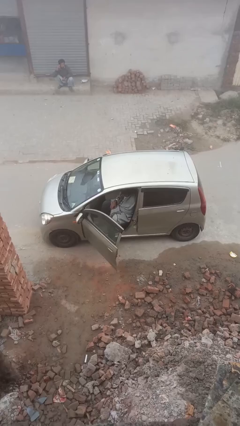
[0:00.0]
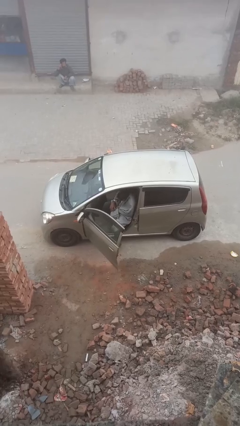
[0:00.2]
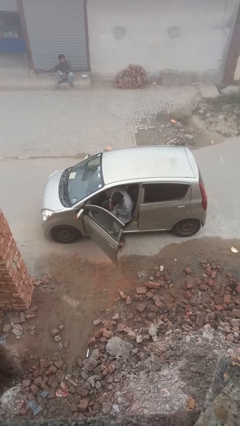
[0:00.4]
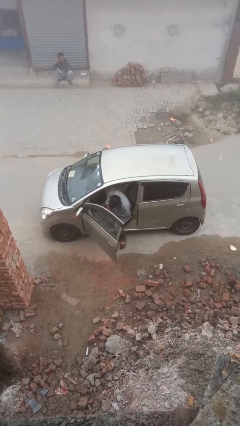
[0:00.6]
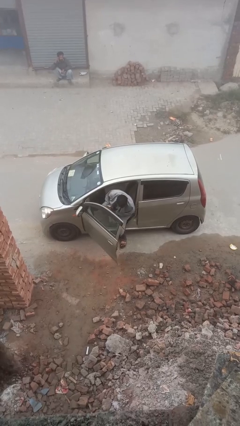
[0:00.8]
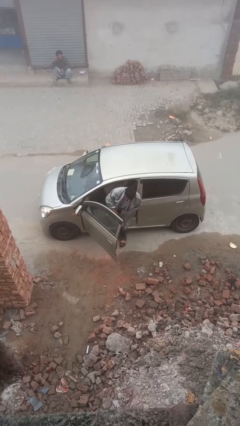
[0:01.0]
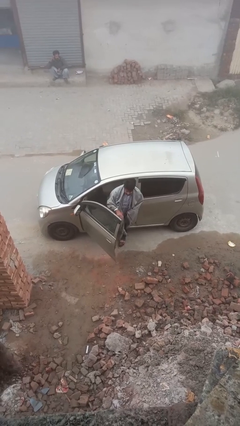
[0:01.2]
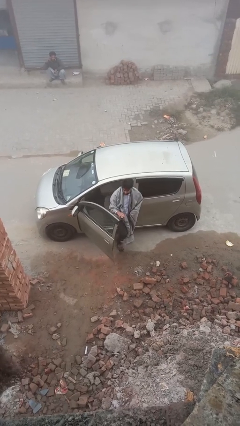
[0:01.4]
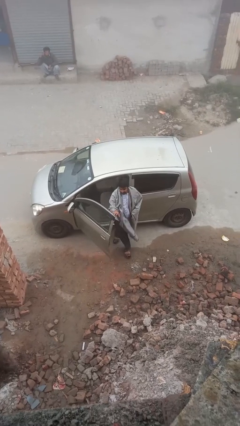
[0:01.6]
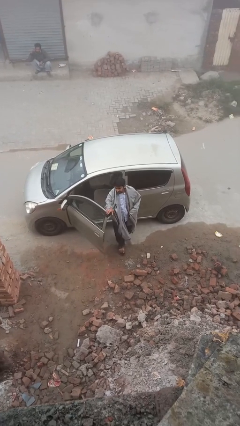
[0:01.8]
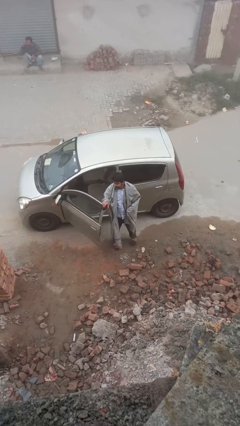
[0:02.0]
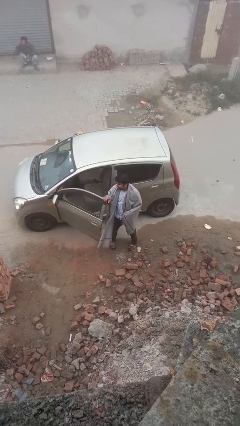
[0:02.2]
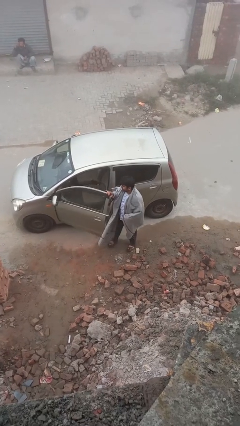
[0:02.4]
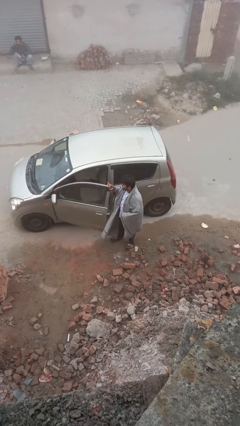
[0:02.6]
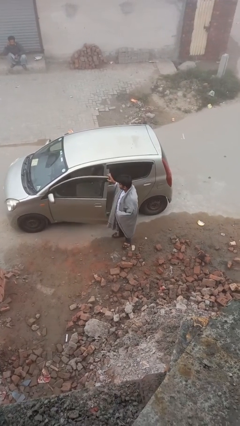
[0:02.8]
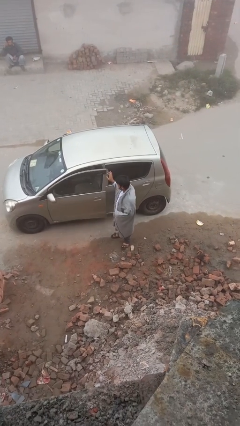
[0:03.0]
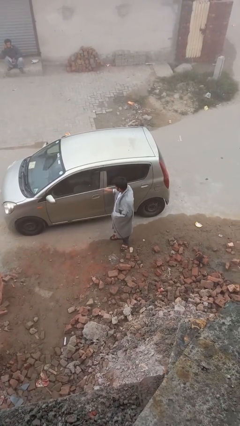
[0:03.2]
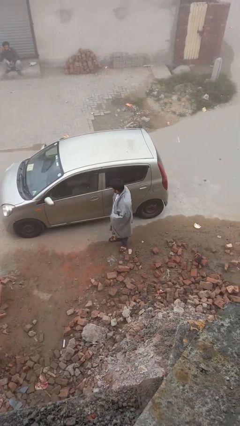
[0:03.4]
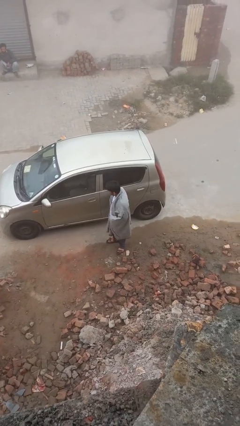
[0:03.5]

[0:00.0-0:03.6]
person exits car

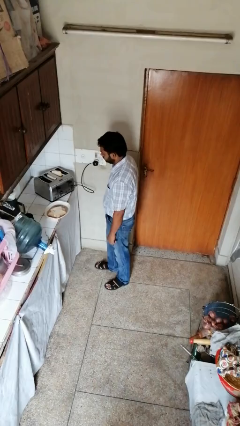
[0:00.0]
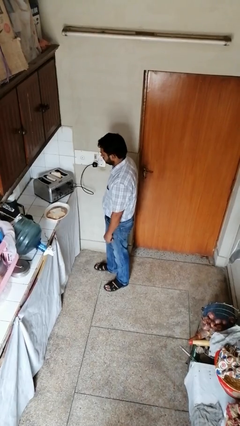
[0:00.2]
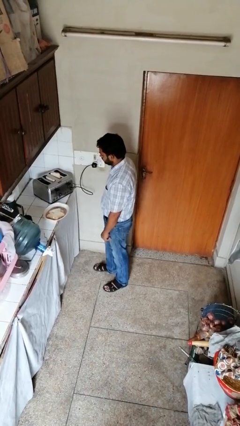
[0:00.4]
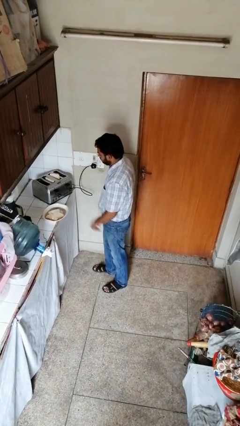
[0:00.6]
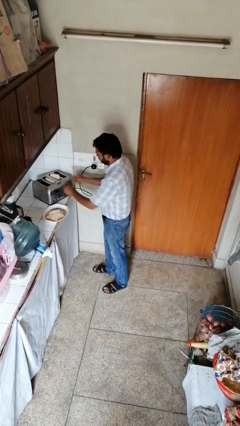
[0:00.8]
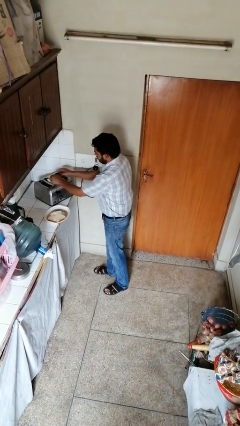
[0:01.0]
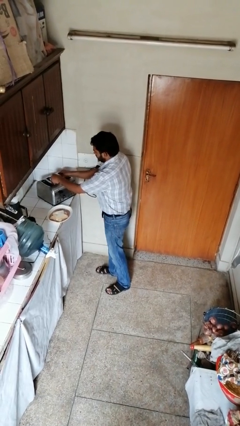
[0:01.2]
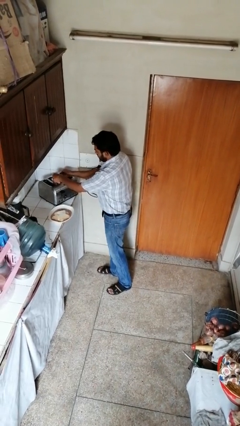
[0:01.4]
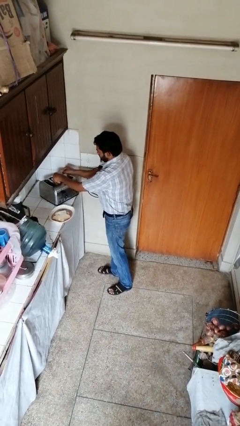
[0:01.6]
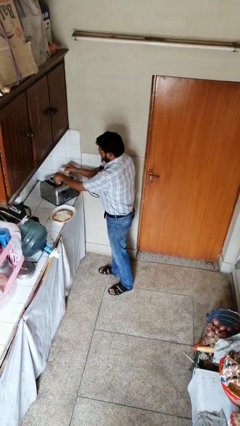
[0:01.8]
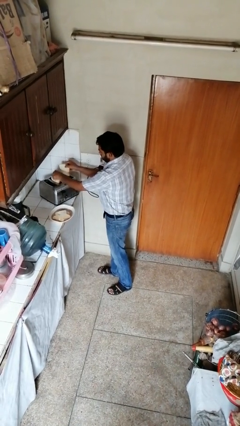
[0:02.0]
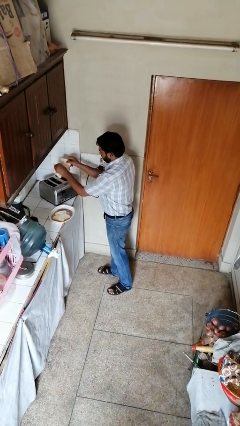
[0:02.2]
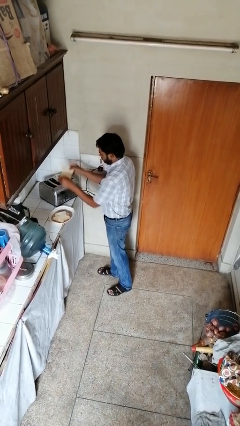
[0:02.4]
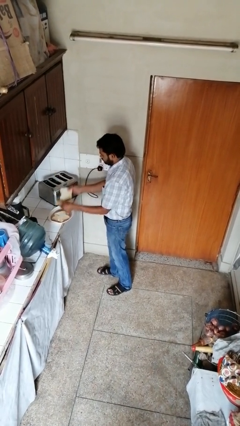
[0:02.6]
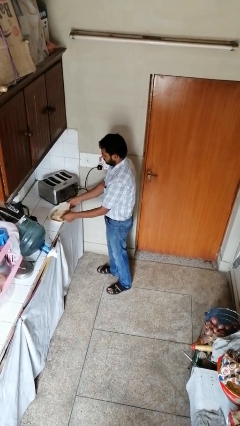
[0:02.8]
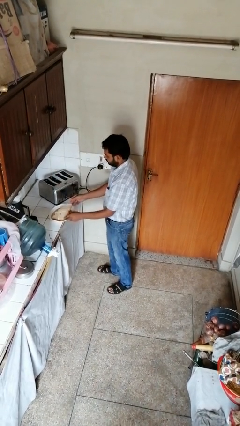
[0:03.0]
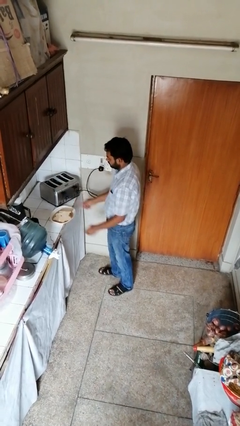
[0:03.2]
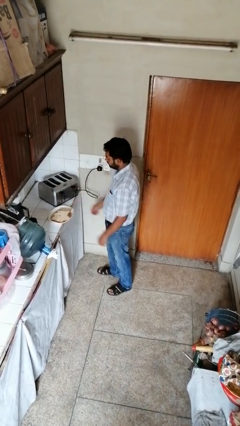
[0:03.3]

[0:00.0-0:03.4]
person takes object from toaster

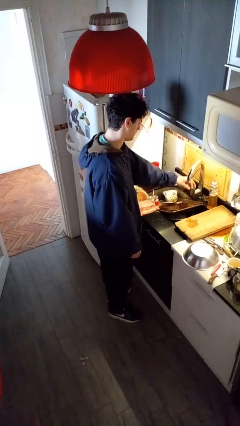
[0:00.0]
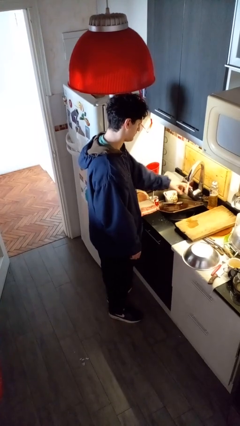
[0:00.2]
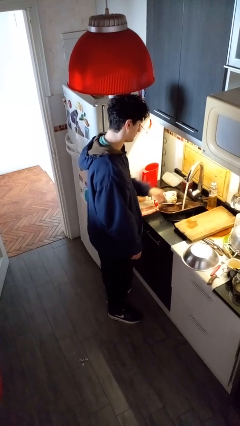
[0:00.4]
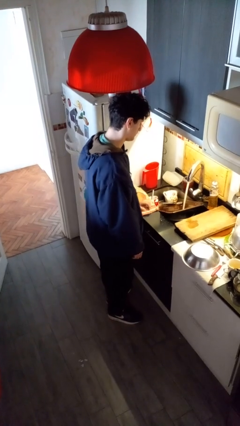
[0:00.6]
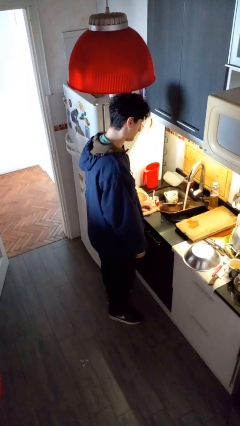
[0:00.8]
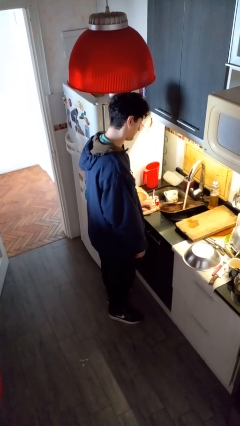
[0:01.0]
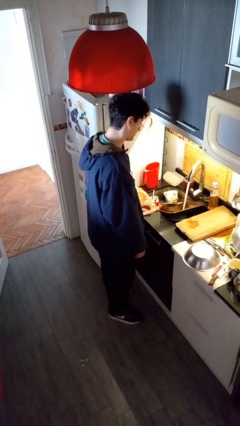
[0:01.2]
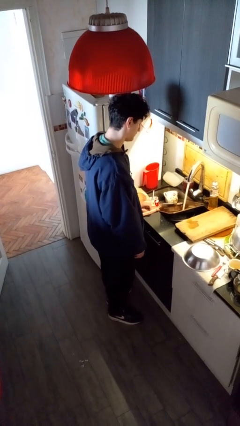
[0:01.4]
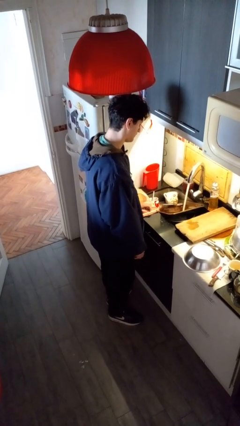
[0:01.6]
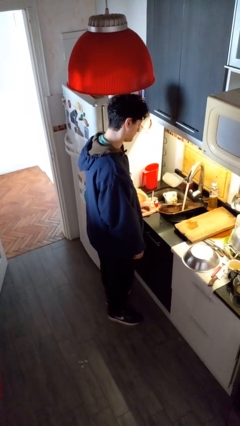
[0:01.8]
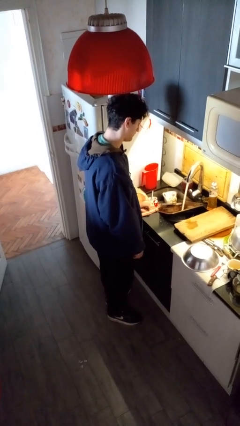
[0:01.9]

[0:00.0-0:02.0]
person turns on faucet

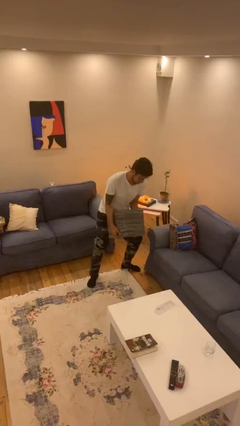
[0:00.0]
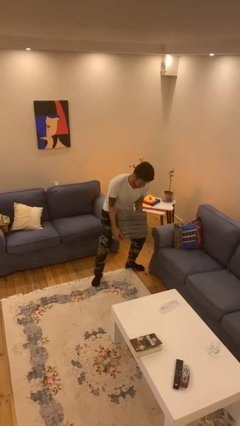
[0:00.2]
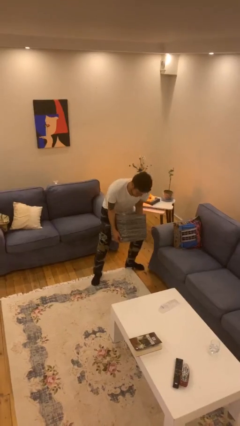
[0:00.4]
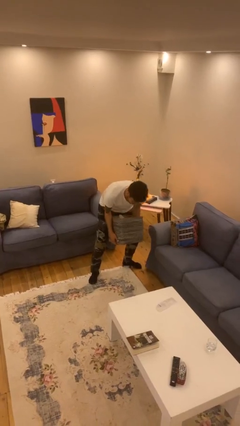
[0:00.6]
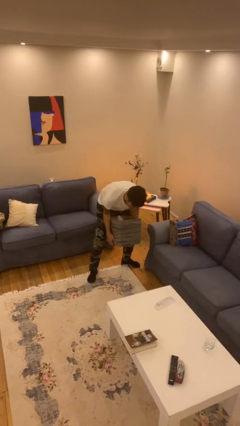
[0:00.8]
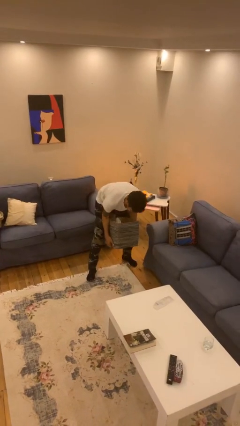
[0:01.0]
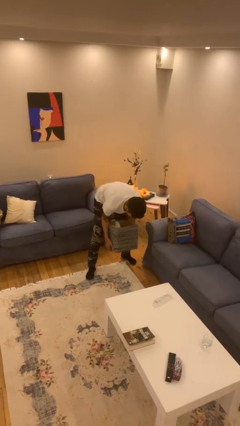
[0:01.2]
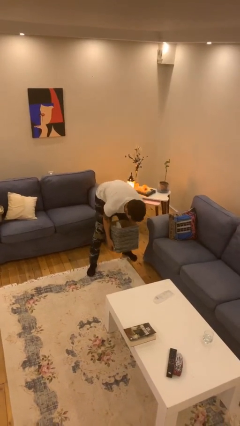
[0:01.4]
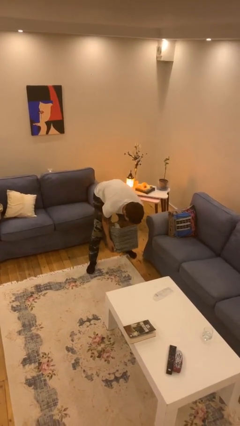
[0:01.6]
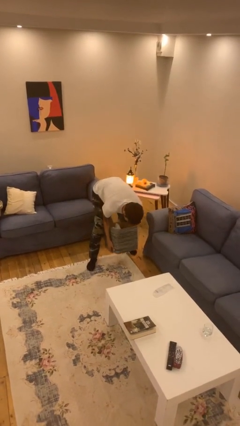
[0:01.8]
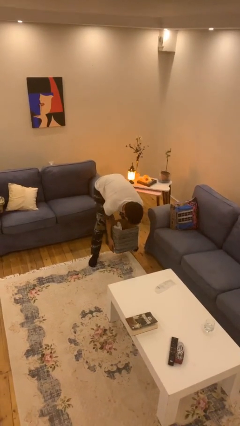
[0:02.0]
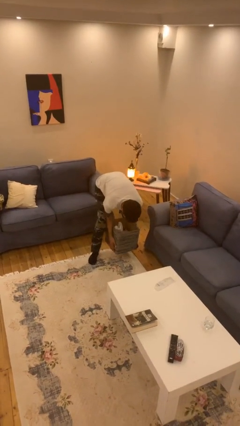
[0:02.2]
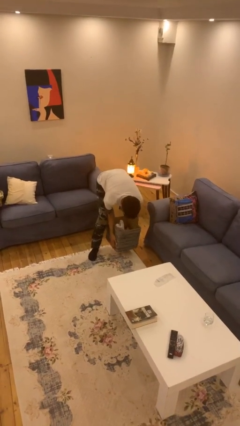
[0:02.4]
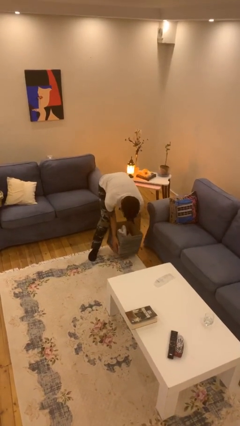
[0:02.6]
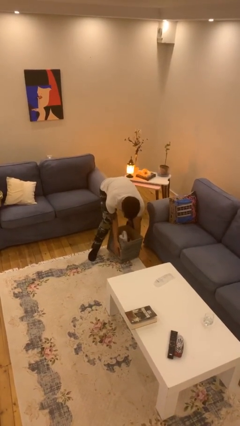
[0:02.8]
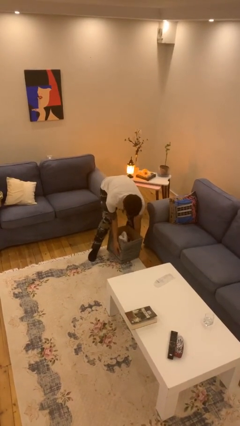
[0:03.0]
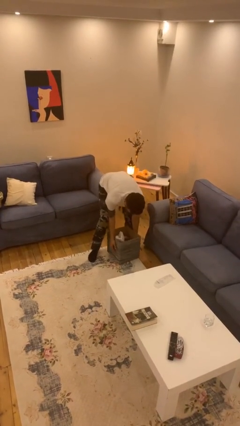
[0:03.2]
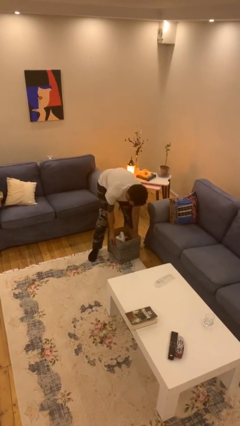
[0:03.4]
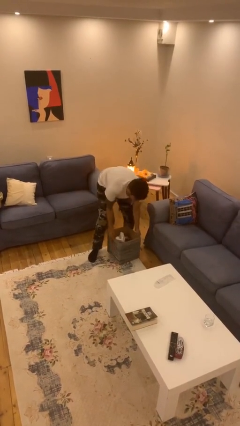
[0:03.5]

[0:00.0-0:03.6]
person puts down object on floor

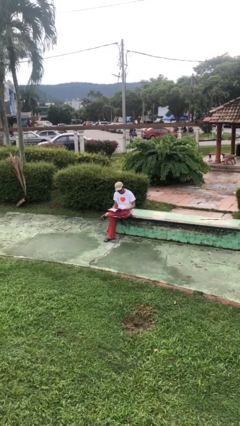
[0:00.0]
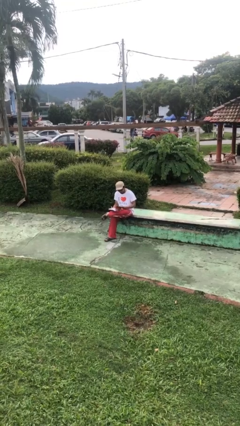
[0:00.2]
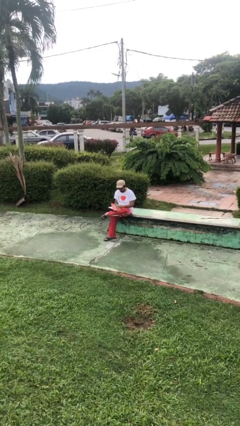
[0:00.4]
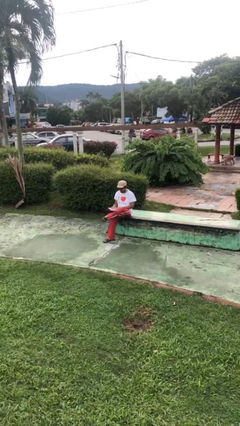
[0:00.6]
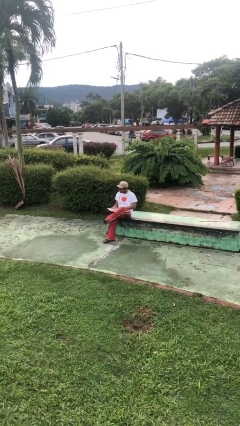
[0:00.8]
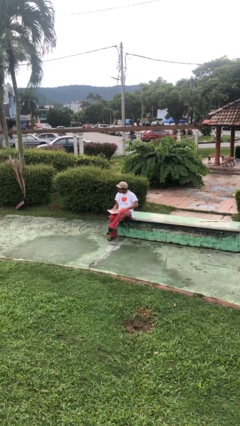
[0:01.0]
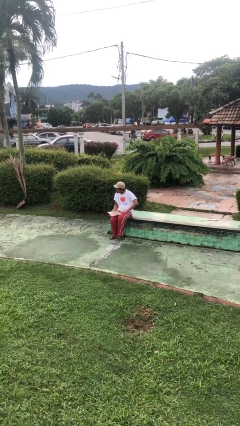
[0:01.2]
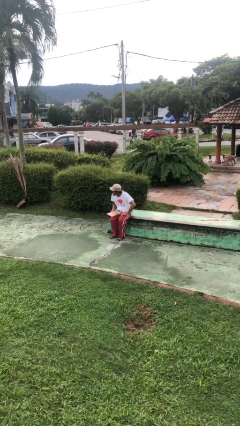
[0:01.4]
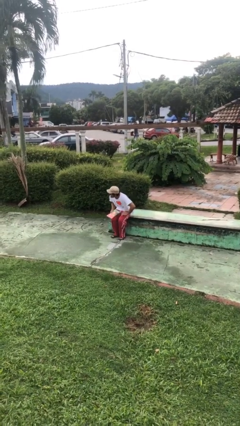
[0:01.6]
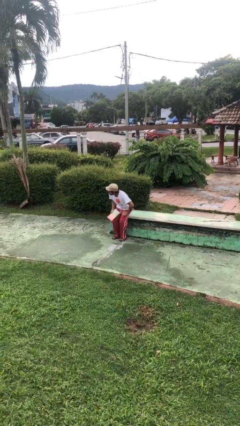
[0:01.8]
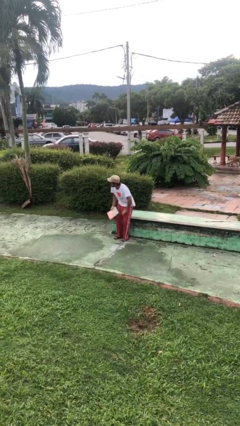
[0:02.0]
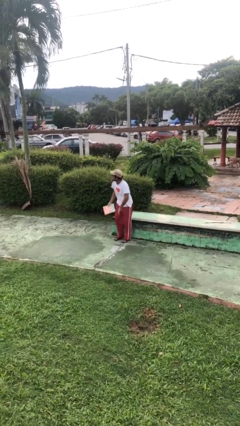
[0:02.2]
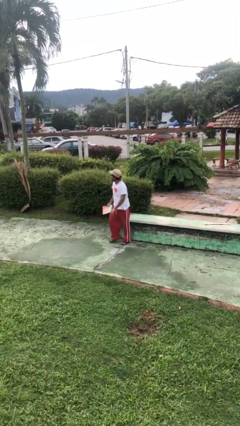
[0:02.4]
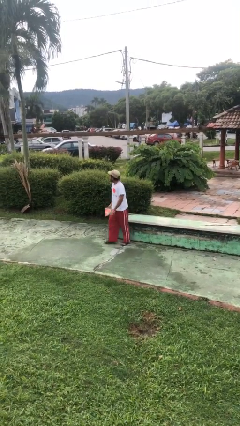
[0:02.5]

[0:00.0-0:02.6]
person stands up

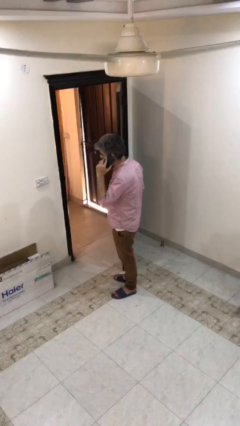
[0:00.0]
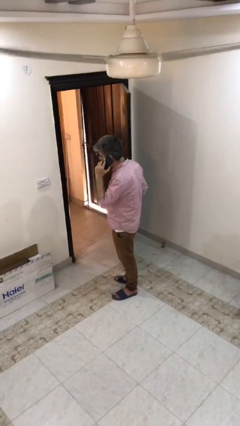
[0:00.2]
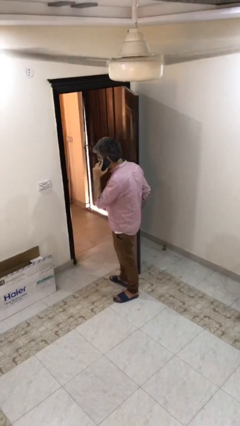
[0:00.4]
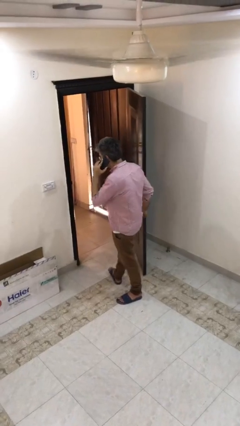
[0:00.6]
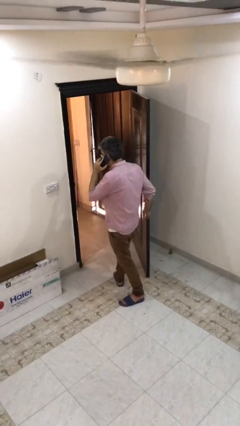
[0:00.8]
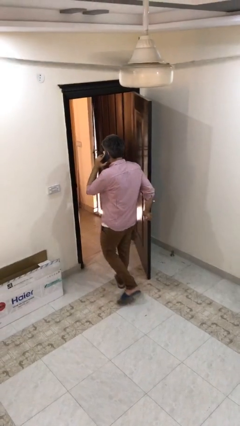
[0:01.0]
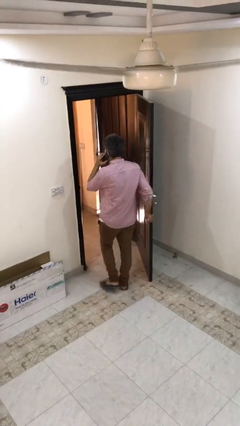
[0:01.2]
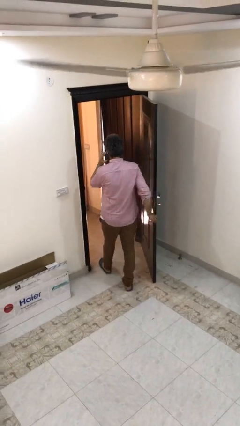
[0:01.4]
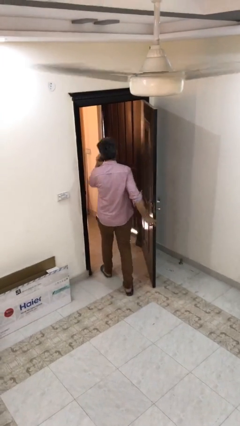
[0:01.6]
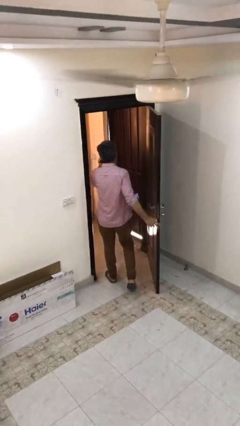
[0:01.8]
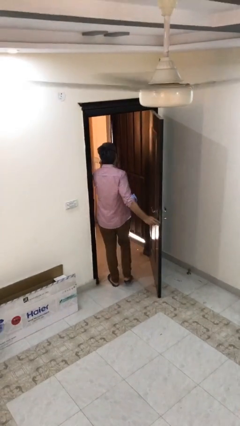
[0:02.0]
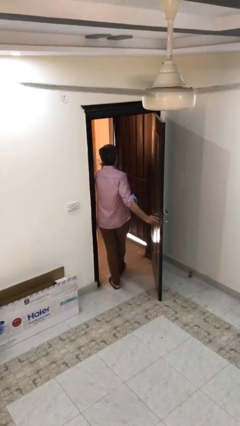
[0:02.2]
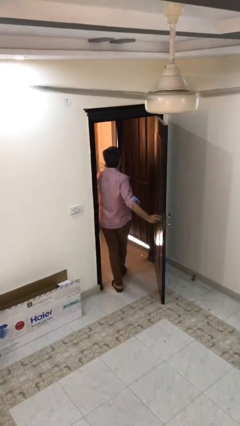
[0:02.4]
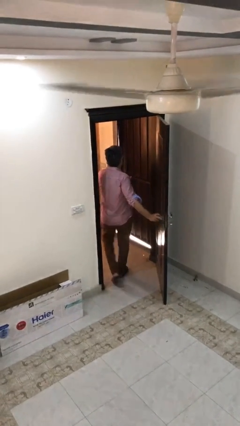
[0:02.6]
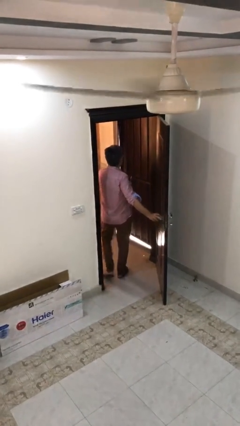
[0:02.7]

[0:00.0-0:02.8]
person exits scene through structure
